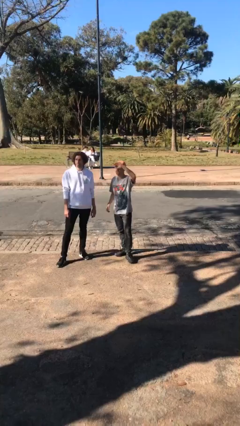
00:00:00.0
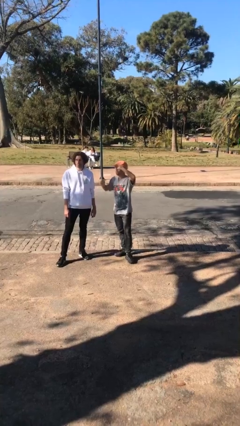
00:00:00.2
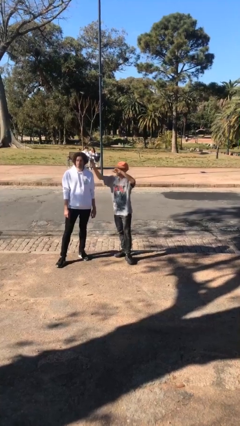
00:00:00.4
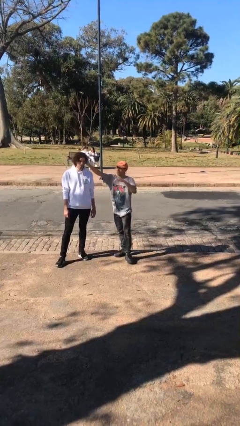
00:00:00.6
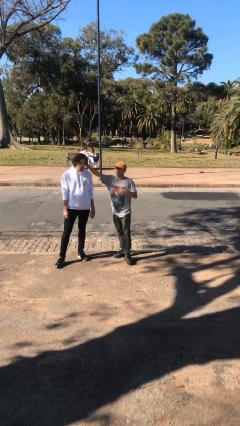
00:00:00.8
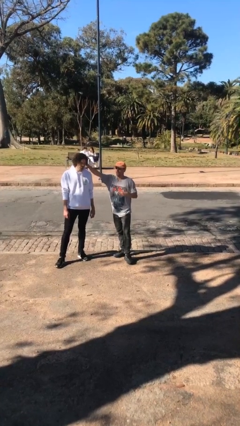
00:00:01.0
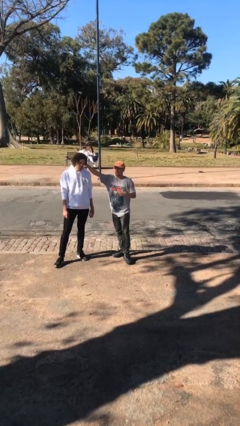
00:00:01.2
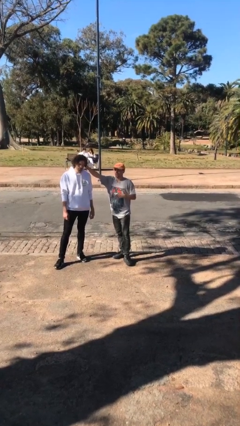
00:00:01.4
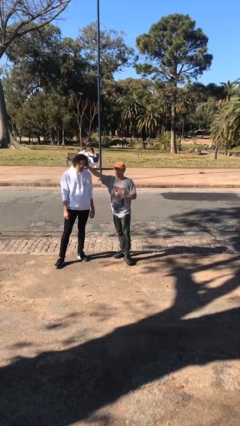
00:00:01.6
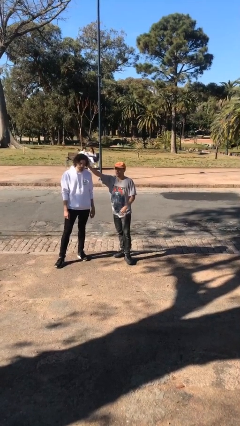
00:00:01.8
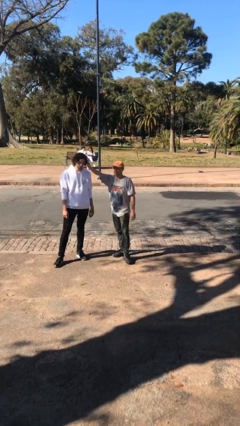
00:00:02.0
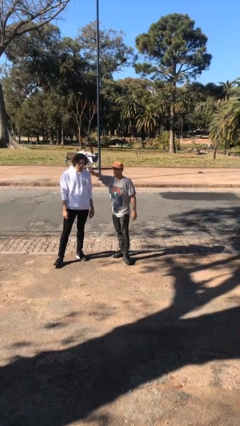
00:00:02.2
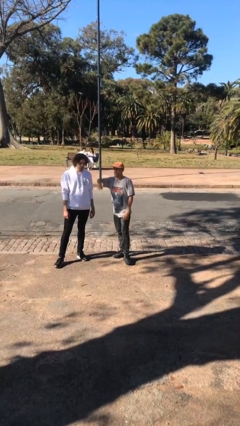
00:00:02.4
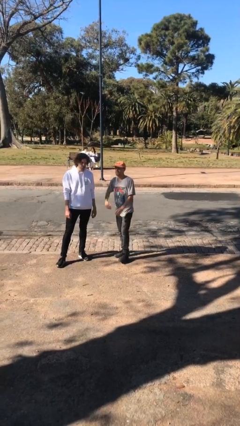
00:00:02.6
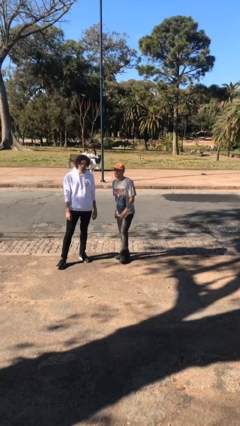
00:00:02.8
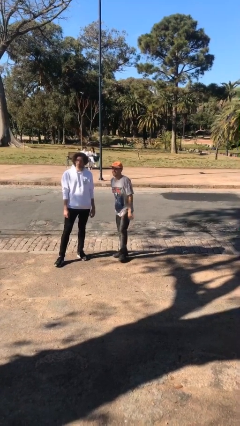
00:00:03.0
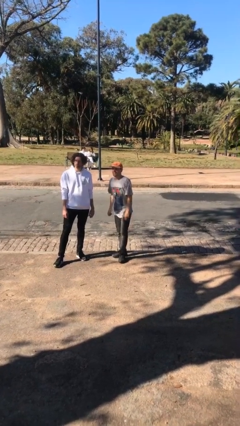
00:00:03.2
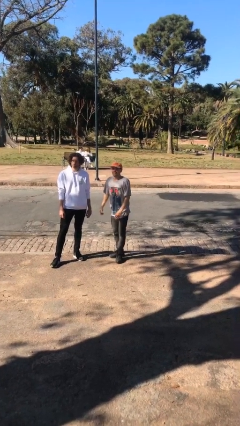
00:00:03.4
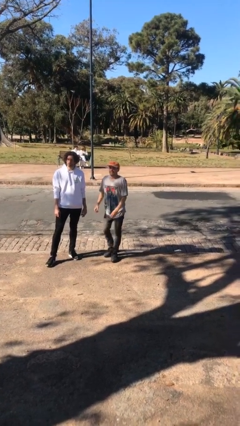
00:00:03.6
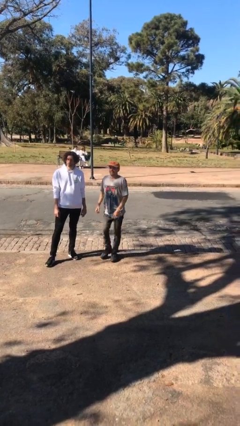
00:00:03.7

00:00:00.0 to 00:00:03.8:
person grabs person by hair

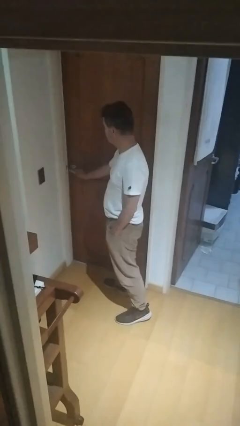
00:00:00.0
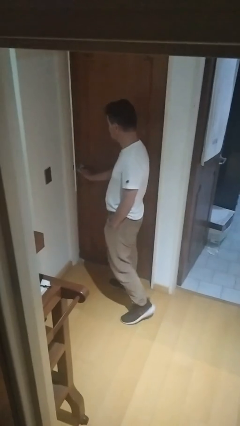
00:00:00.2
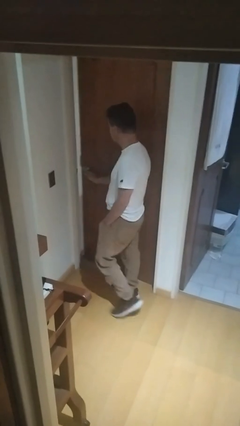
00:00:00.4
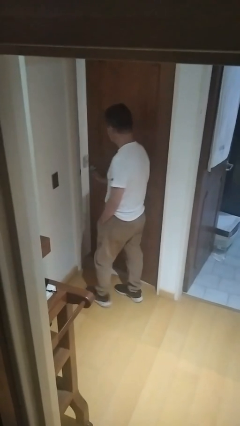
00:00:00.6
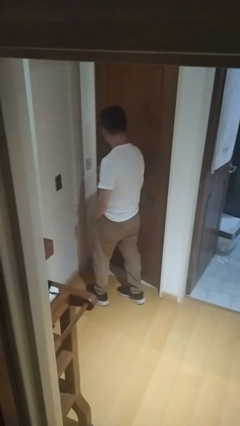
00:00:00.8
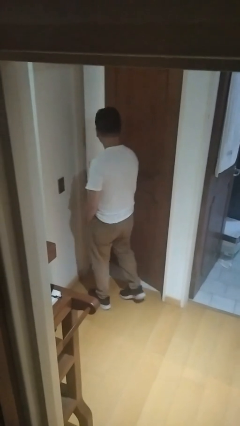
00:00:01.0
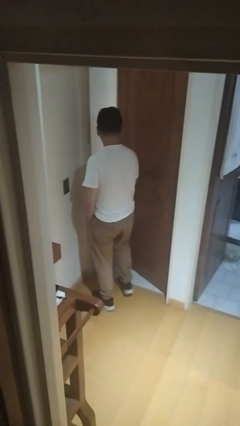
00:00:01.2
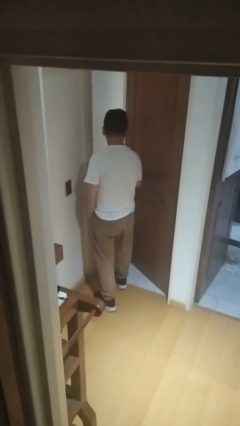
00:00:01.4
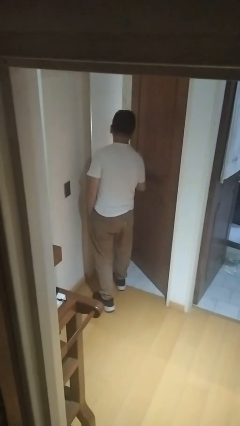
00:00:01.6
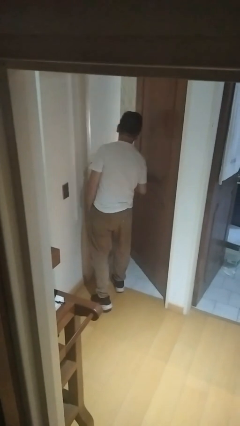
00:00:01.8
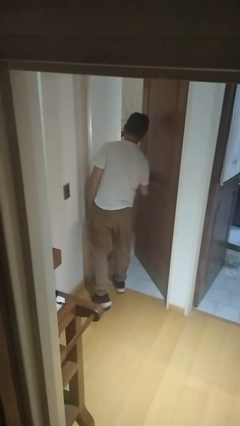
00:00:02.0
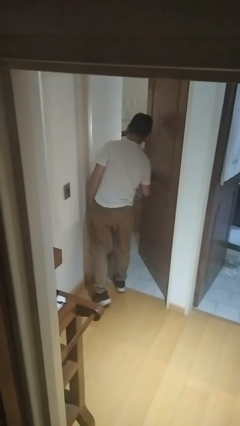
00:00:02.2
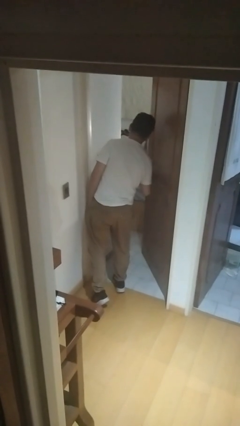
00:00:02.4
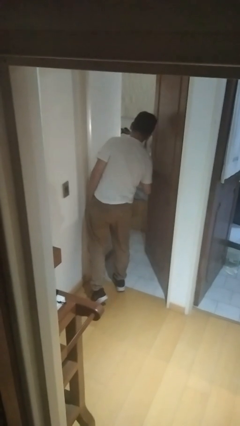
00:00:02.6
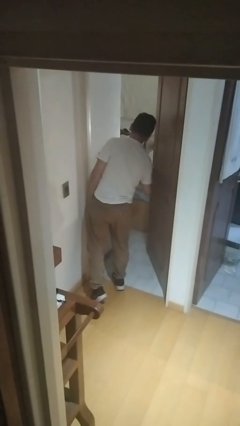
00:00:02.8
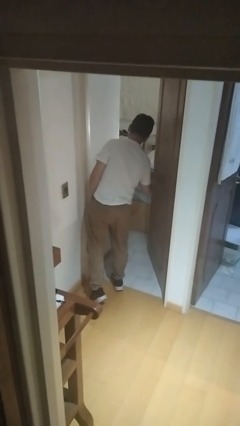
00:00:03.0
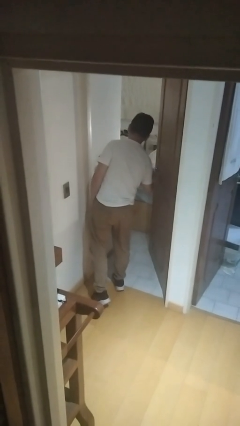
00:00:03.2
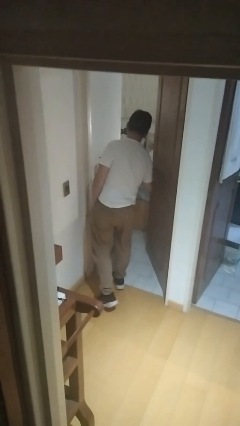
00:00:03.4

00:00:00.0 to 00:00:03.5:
person opens facility door

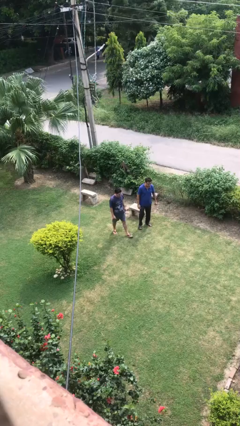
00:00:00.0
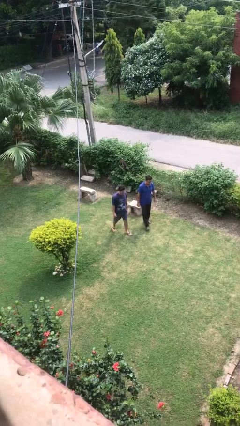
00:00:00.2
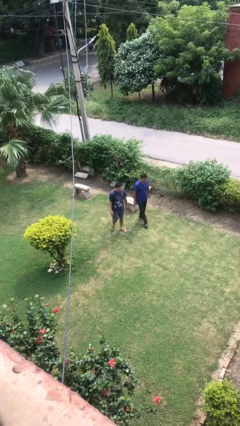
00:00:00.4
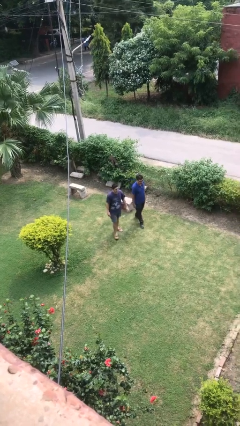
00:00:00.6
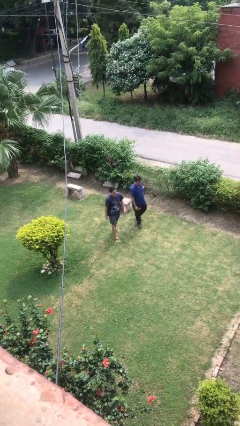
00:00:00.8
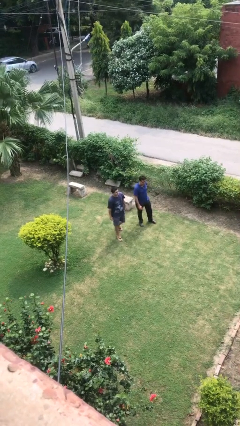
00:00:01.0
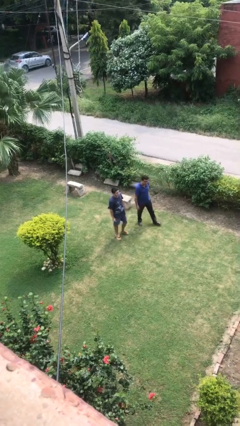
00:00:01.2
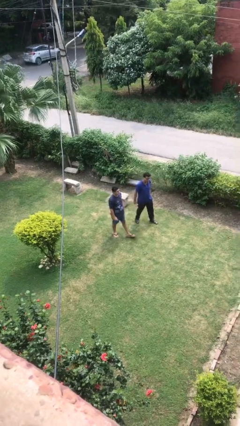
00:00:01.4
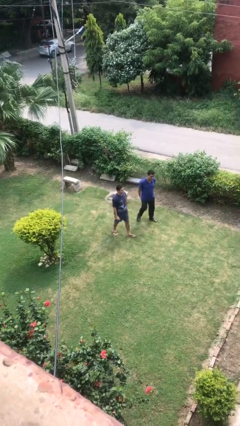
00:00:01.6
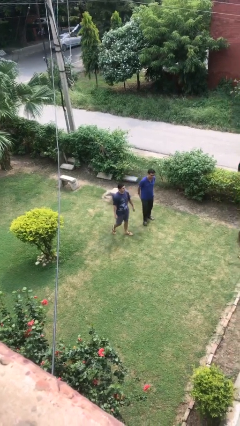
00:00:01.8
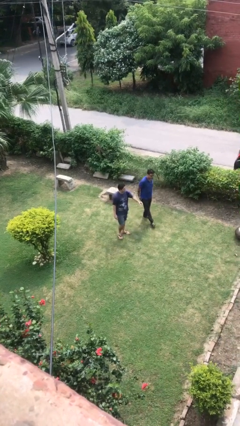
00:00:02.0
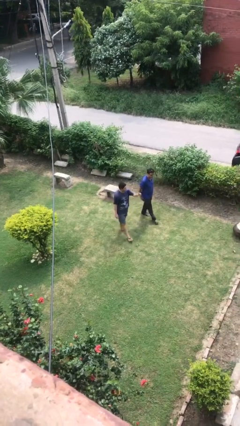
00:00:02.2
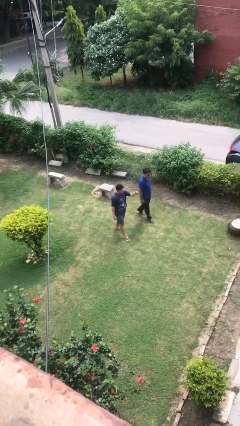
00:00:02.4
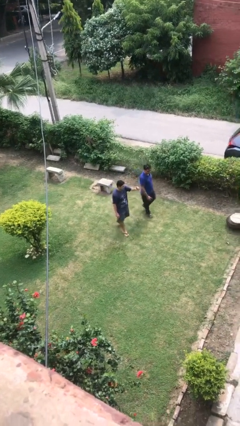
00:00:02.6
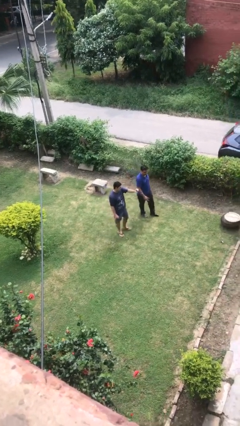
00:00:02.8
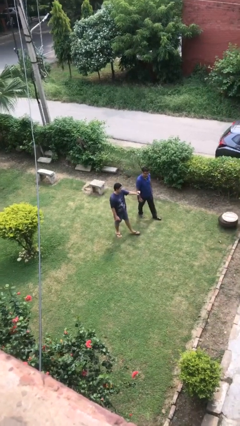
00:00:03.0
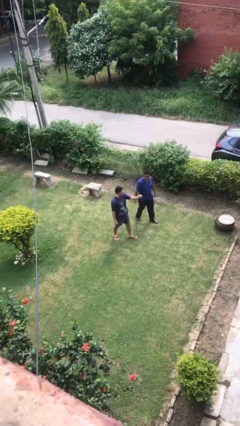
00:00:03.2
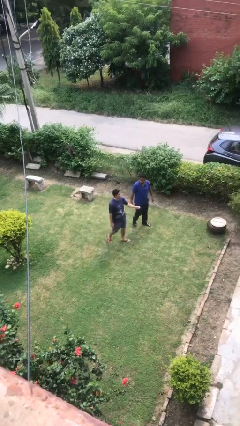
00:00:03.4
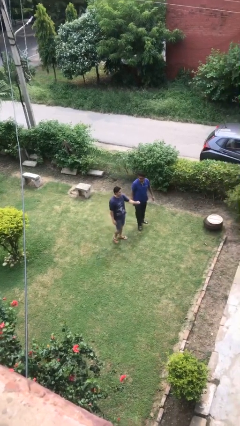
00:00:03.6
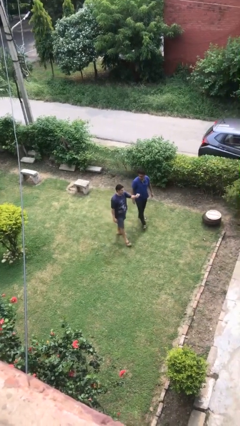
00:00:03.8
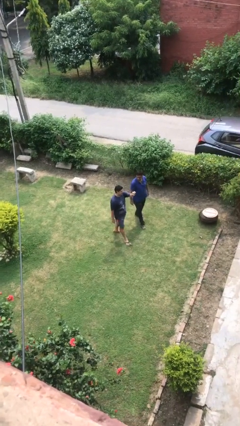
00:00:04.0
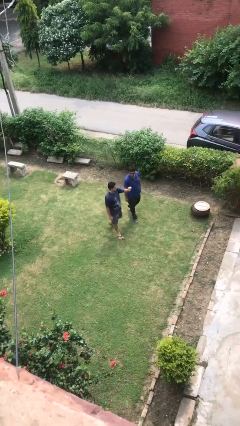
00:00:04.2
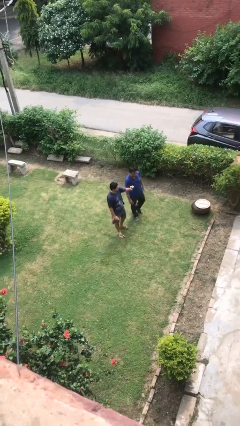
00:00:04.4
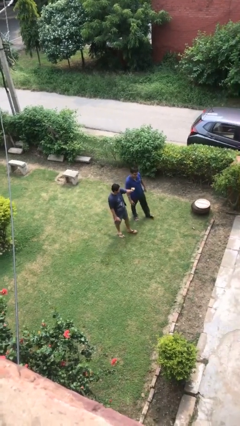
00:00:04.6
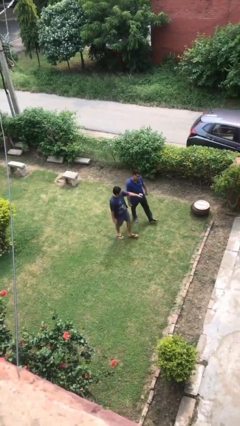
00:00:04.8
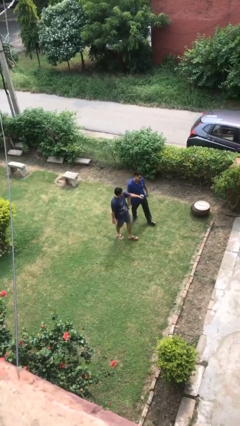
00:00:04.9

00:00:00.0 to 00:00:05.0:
person talks to person

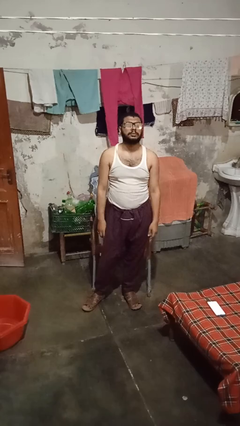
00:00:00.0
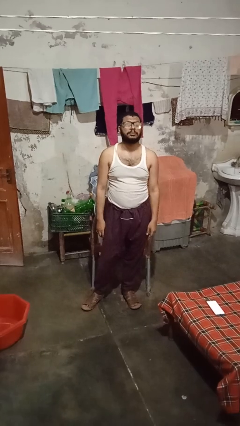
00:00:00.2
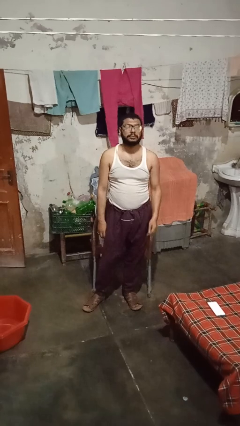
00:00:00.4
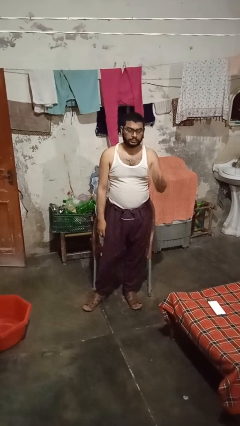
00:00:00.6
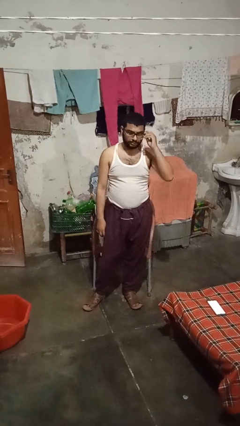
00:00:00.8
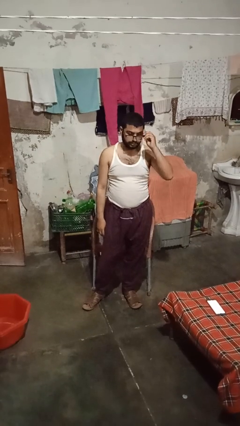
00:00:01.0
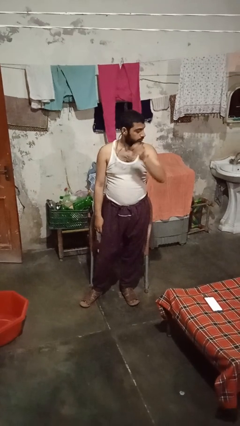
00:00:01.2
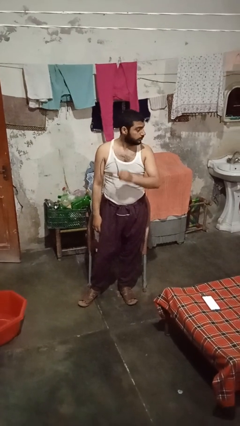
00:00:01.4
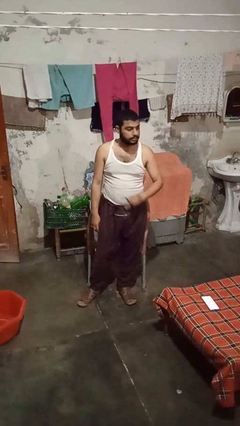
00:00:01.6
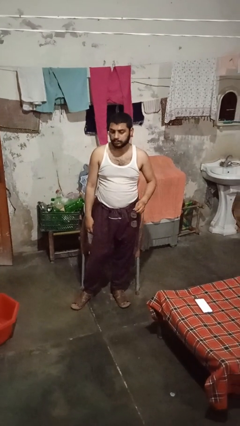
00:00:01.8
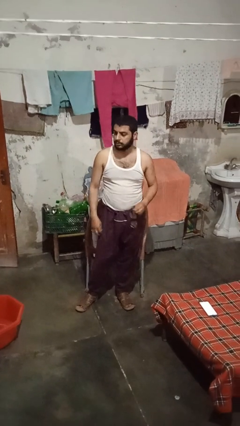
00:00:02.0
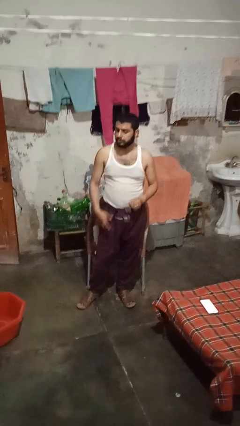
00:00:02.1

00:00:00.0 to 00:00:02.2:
person takes off glasses

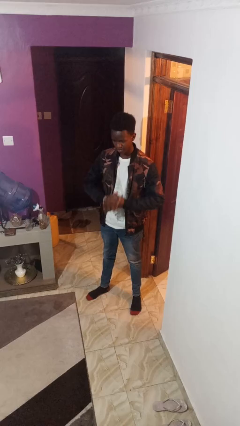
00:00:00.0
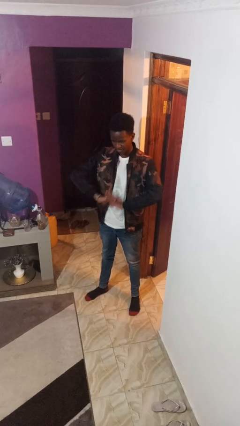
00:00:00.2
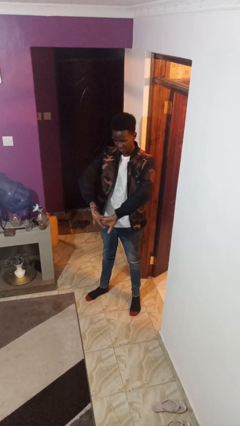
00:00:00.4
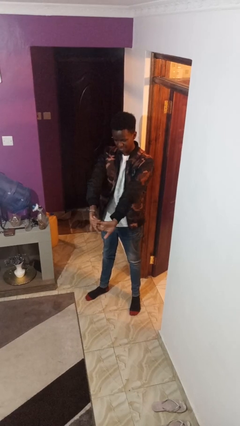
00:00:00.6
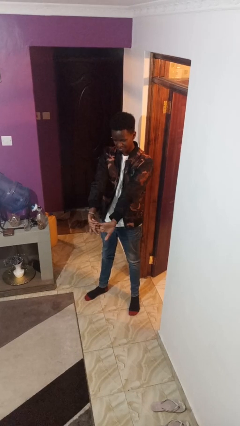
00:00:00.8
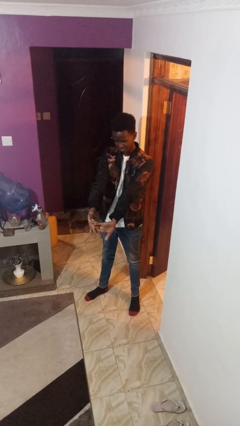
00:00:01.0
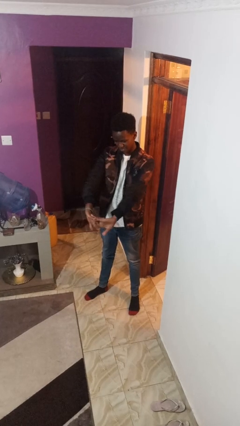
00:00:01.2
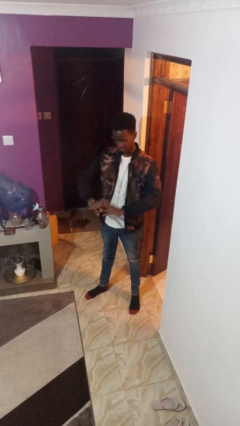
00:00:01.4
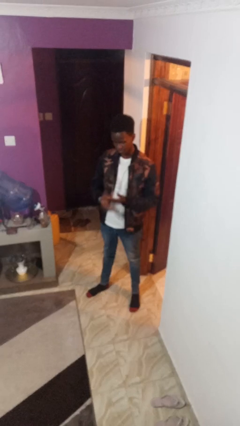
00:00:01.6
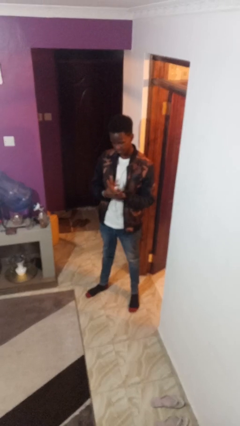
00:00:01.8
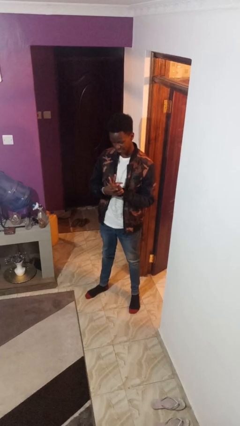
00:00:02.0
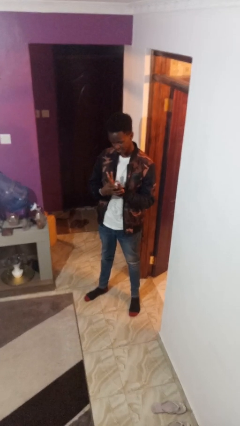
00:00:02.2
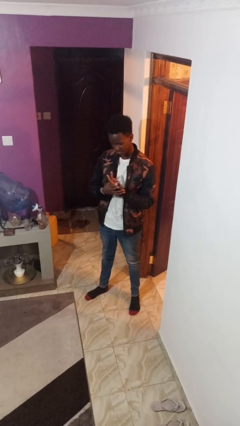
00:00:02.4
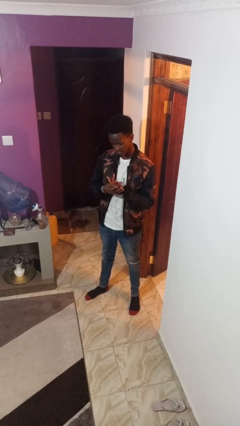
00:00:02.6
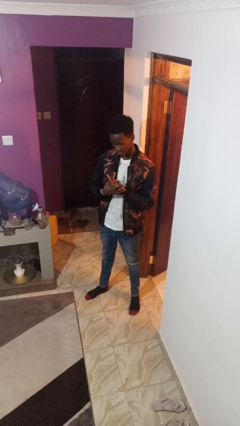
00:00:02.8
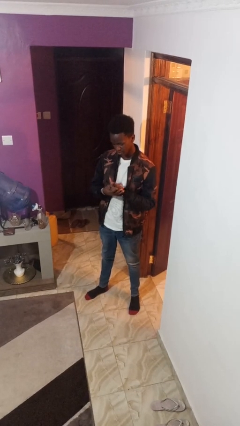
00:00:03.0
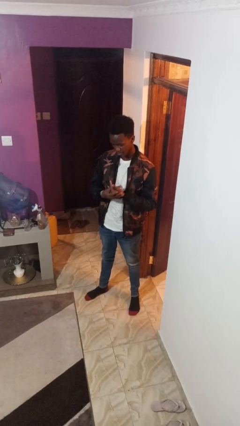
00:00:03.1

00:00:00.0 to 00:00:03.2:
person cracks knuckles
